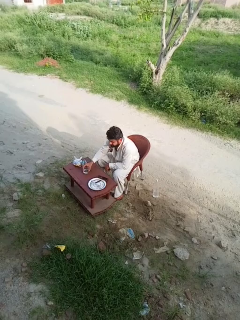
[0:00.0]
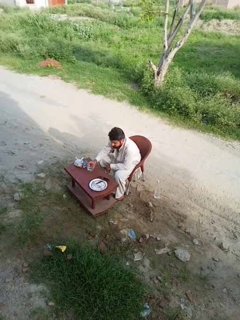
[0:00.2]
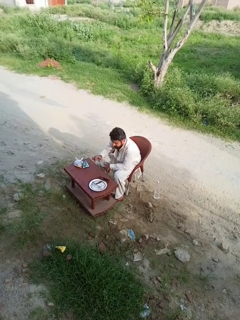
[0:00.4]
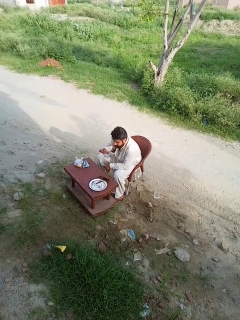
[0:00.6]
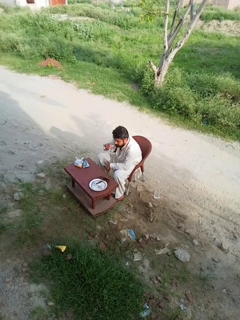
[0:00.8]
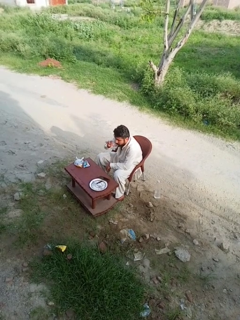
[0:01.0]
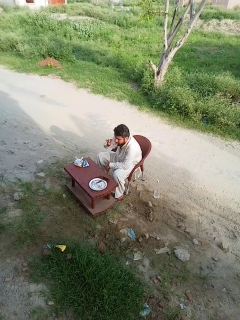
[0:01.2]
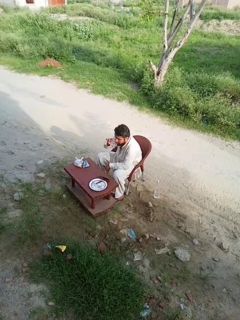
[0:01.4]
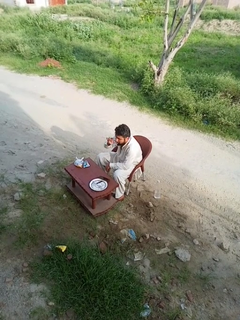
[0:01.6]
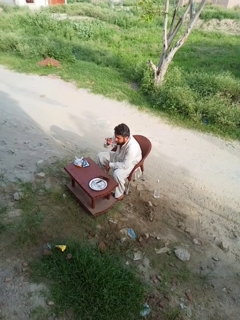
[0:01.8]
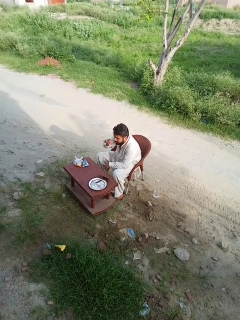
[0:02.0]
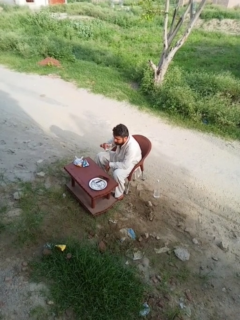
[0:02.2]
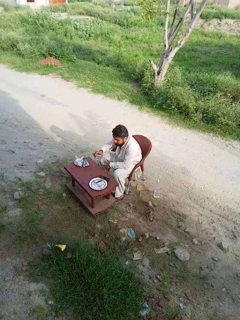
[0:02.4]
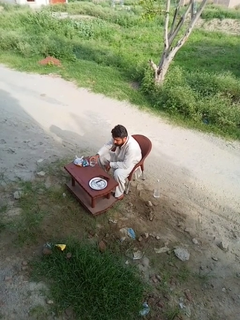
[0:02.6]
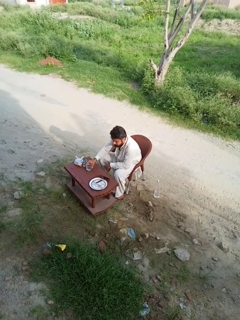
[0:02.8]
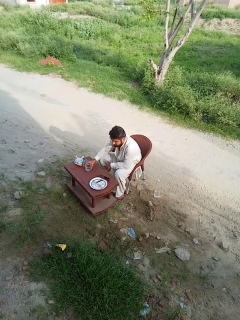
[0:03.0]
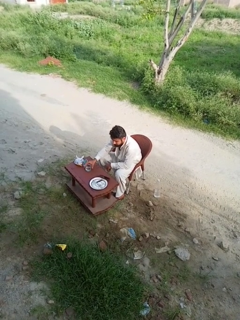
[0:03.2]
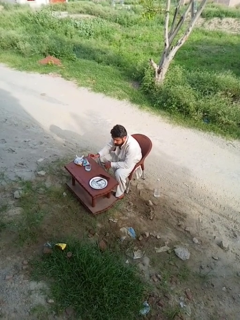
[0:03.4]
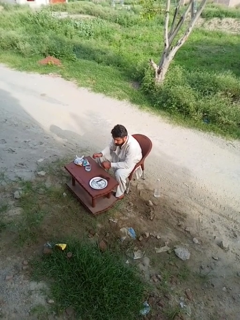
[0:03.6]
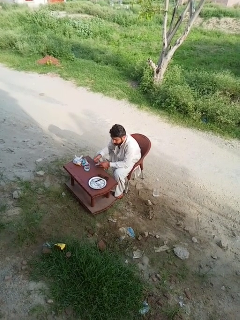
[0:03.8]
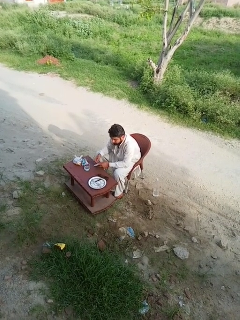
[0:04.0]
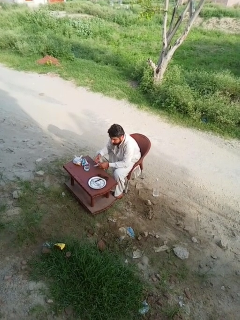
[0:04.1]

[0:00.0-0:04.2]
person drinks from cup

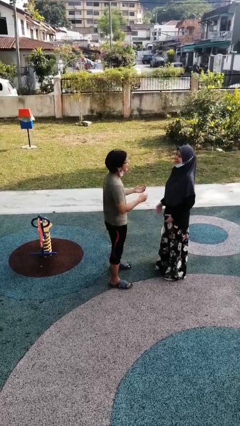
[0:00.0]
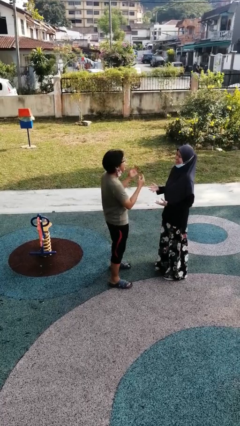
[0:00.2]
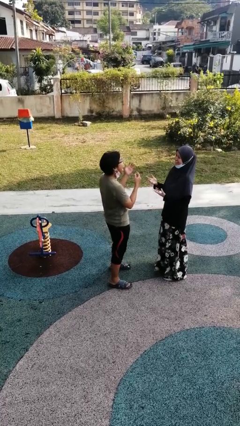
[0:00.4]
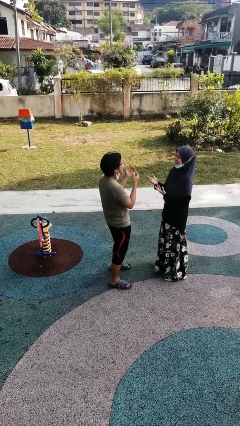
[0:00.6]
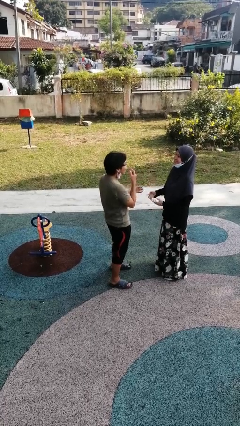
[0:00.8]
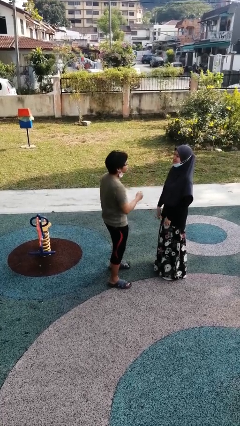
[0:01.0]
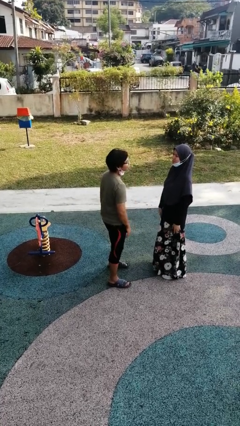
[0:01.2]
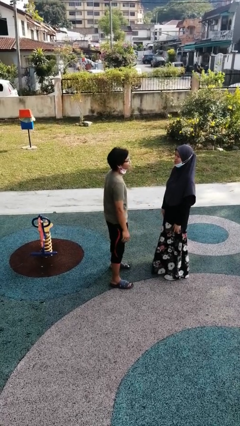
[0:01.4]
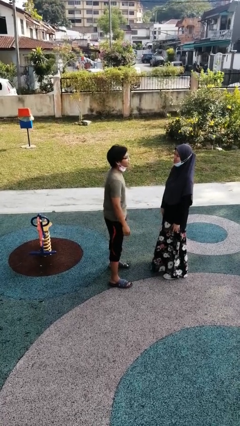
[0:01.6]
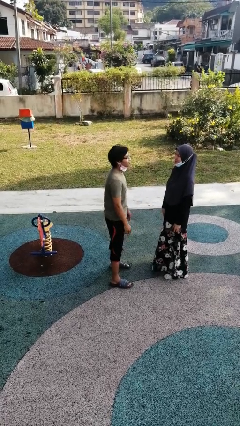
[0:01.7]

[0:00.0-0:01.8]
person laughs with person

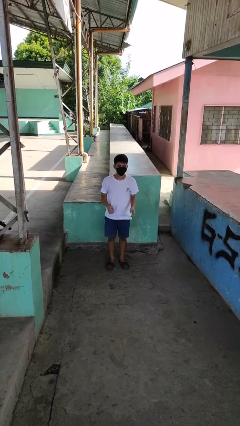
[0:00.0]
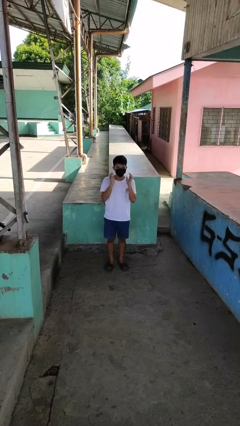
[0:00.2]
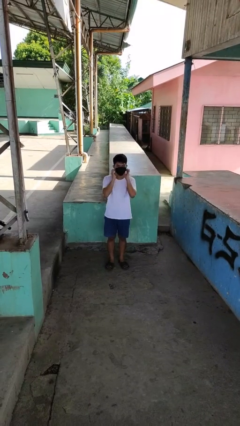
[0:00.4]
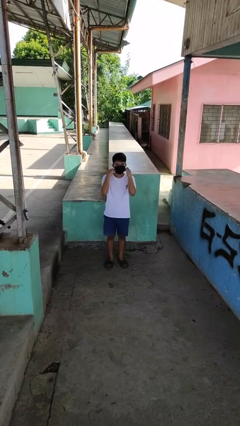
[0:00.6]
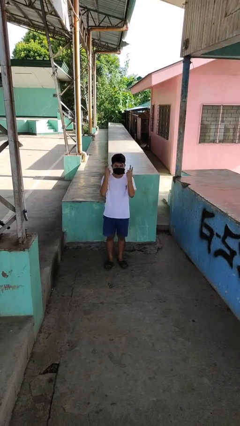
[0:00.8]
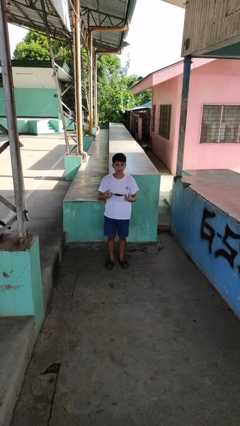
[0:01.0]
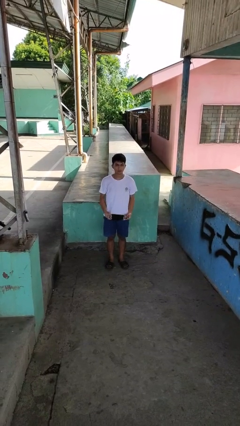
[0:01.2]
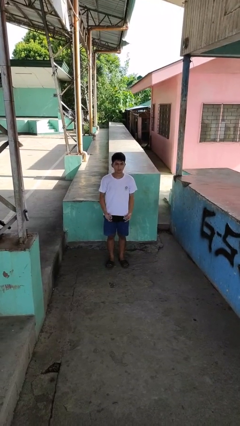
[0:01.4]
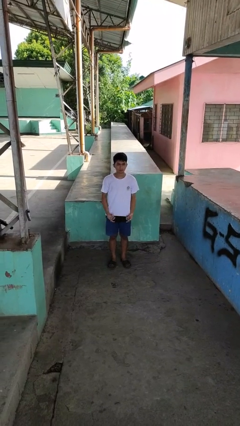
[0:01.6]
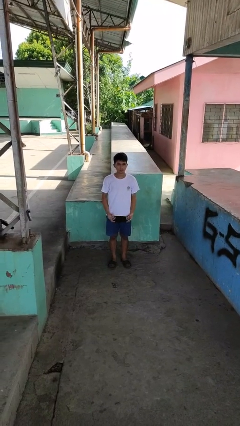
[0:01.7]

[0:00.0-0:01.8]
person takes off facemask

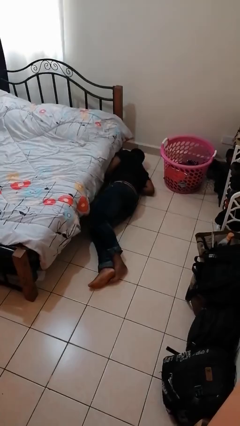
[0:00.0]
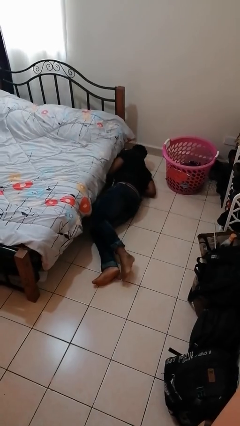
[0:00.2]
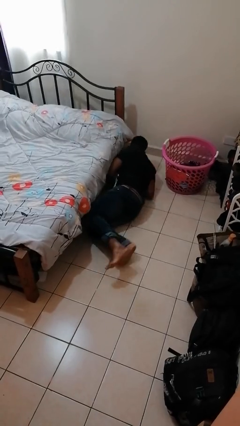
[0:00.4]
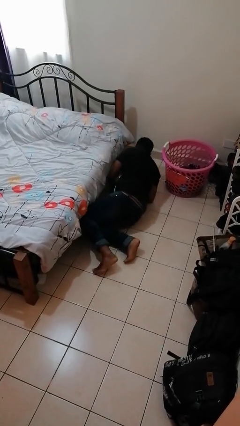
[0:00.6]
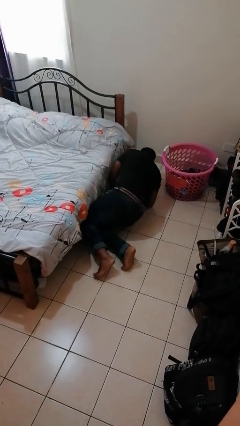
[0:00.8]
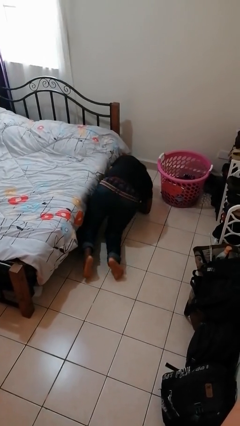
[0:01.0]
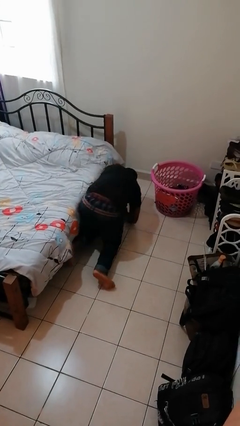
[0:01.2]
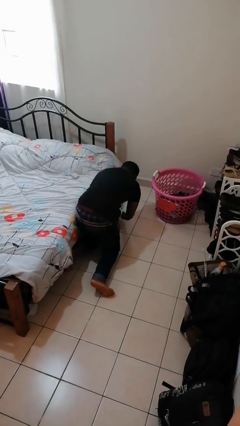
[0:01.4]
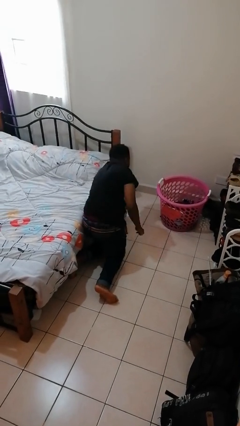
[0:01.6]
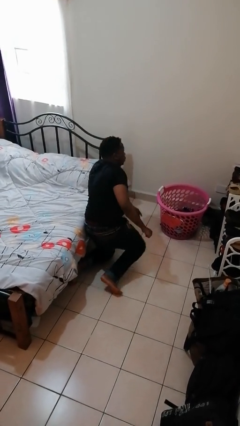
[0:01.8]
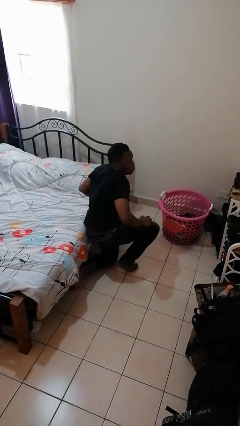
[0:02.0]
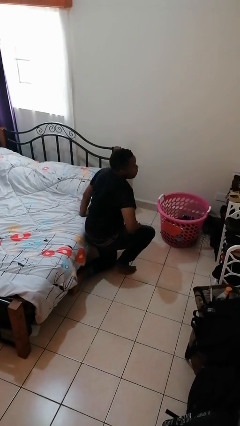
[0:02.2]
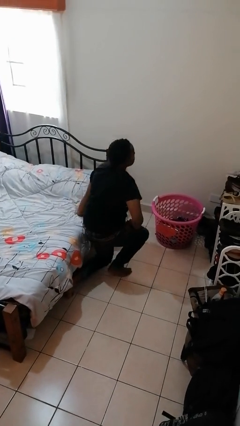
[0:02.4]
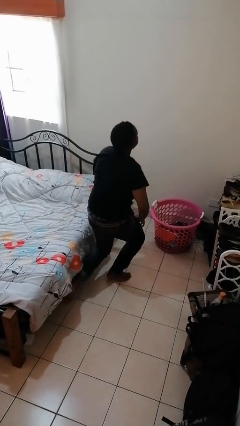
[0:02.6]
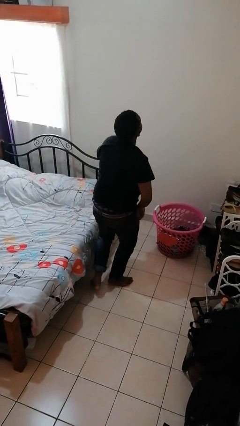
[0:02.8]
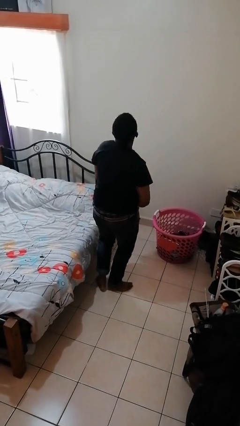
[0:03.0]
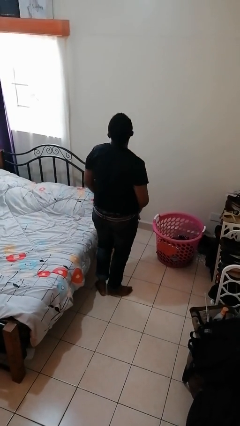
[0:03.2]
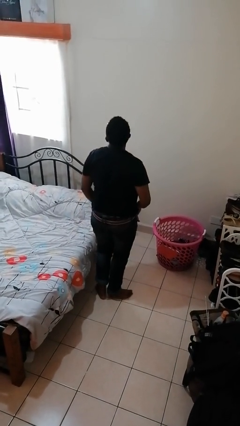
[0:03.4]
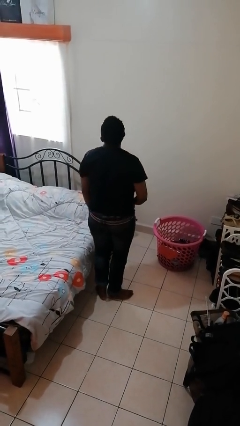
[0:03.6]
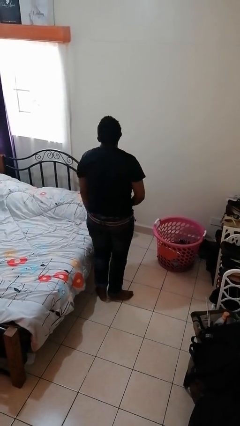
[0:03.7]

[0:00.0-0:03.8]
person stands up from floor

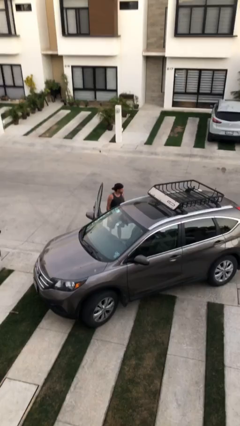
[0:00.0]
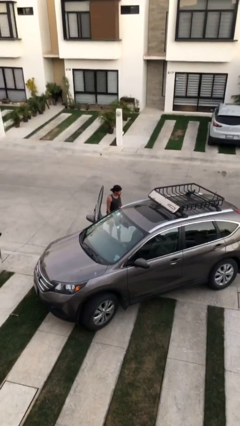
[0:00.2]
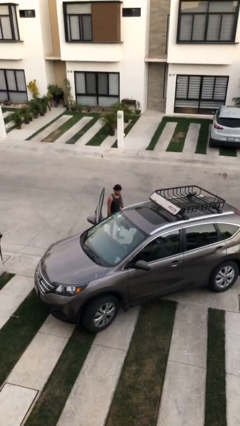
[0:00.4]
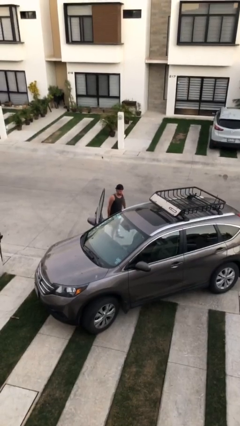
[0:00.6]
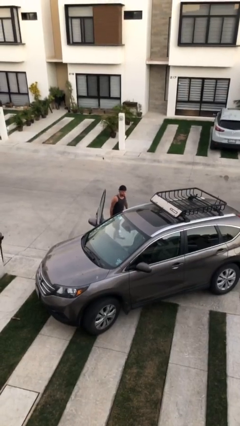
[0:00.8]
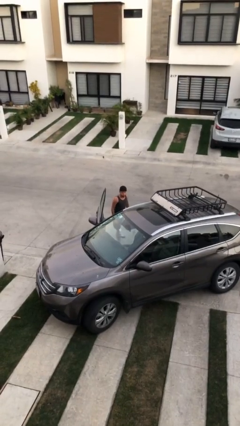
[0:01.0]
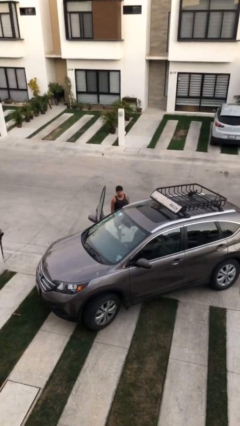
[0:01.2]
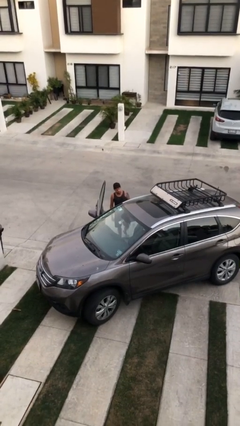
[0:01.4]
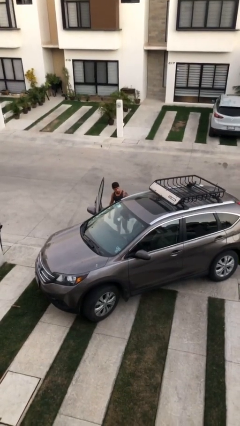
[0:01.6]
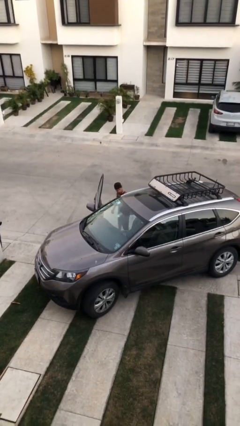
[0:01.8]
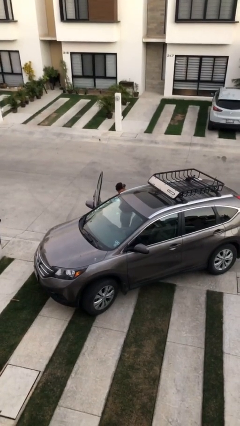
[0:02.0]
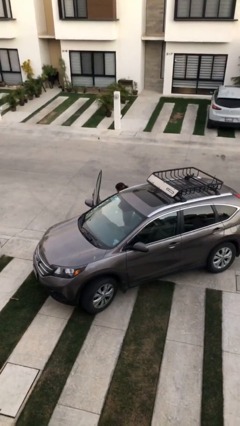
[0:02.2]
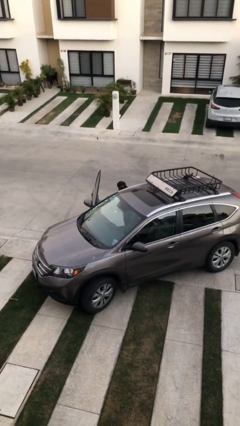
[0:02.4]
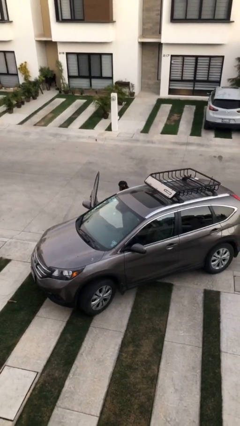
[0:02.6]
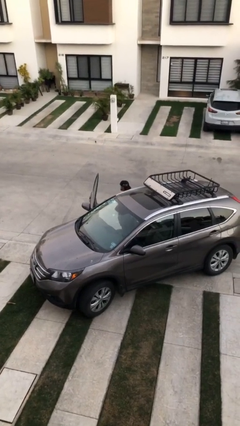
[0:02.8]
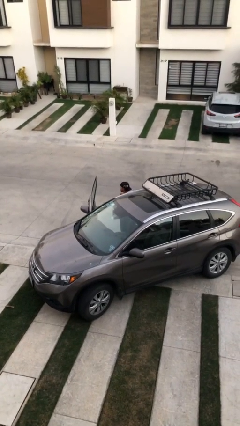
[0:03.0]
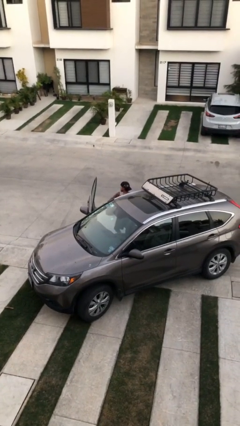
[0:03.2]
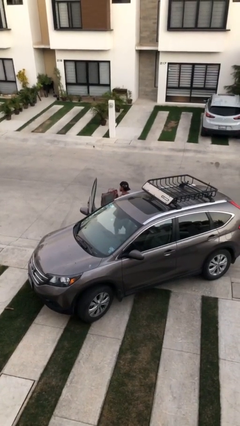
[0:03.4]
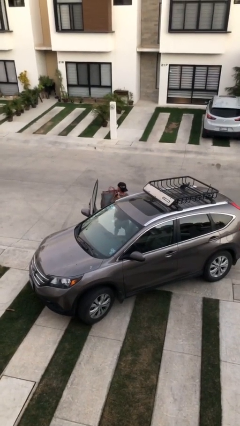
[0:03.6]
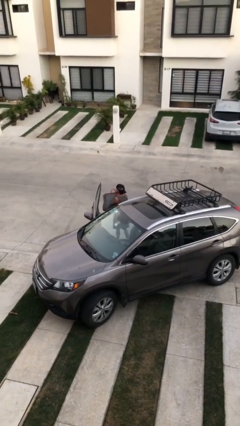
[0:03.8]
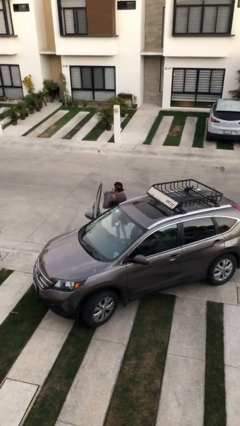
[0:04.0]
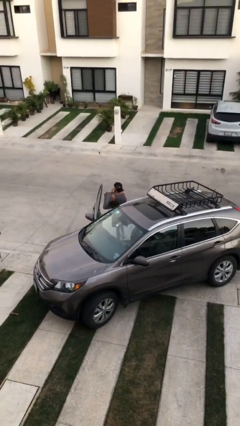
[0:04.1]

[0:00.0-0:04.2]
person unloads car

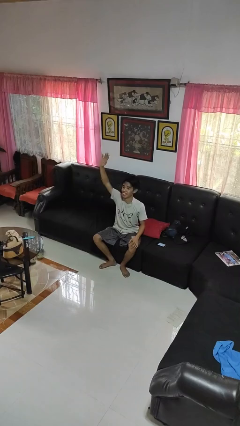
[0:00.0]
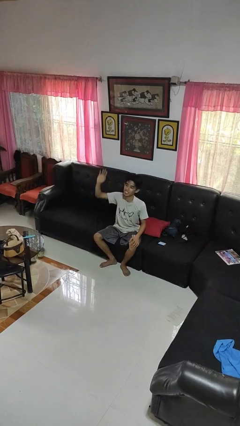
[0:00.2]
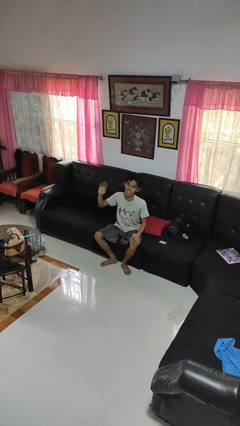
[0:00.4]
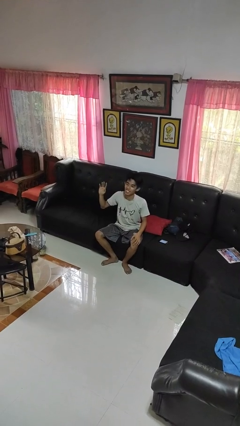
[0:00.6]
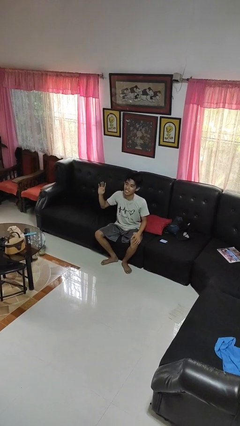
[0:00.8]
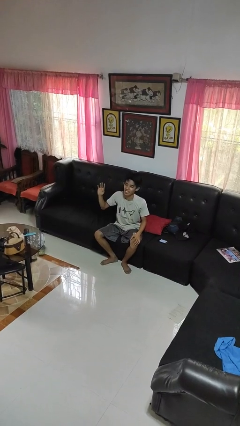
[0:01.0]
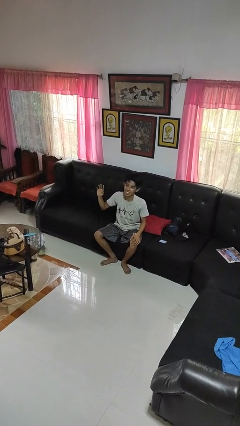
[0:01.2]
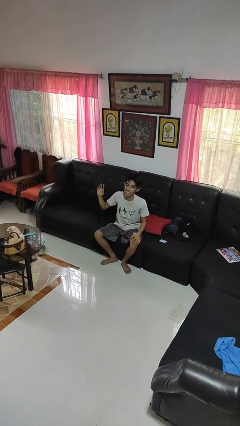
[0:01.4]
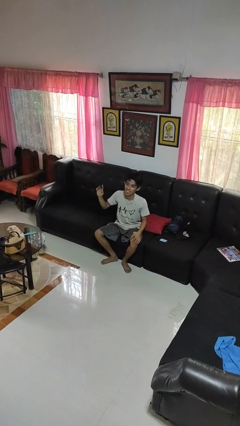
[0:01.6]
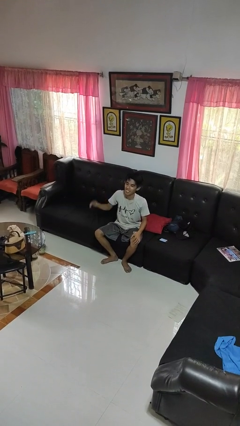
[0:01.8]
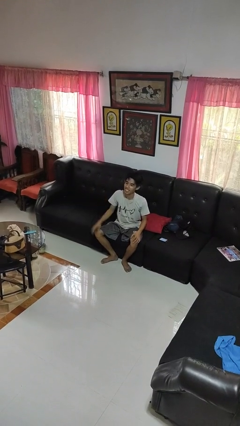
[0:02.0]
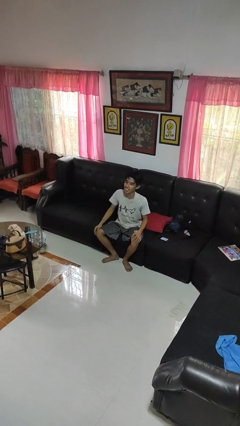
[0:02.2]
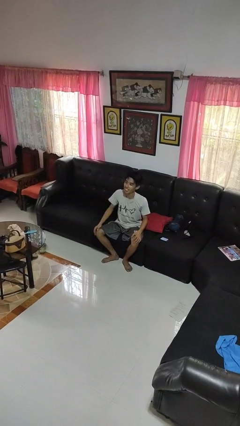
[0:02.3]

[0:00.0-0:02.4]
person gestures lower hand

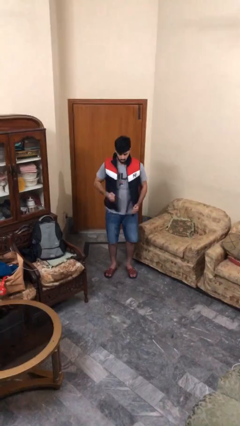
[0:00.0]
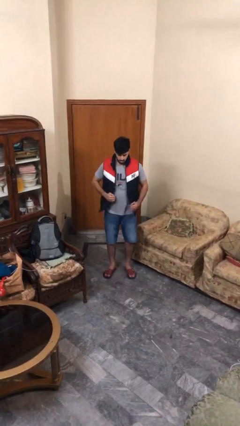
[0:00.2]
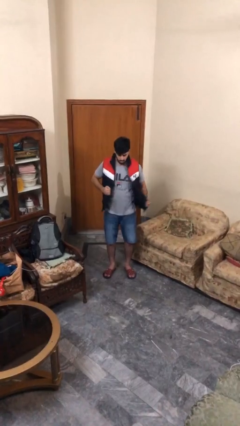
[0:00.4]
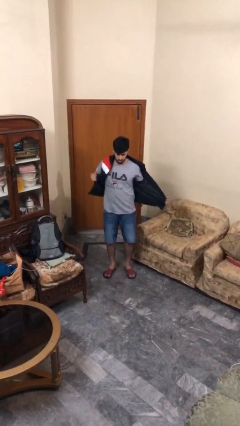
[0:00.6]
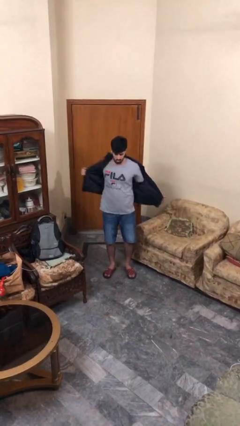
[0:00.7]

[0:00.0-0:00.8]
person takes off jacket
